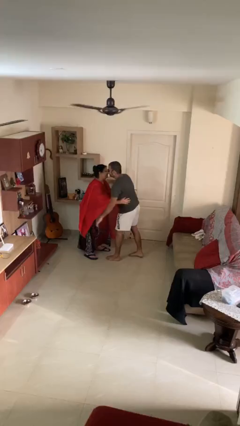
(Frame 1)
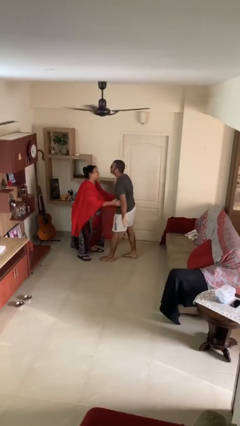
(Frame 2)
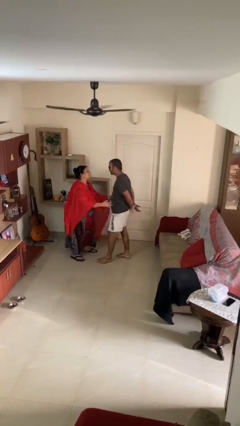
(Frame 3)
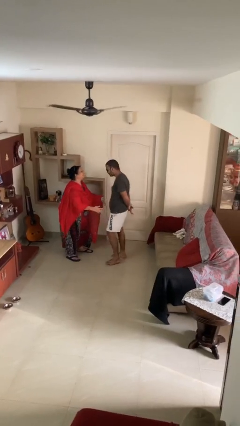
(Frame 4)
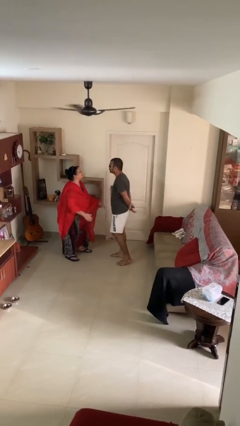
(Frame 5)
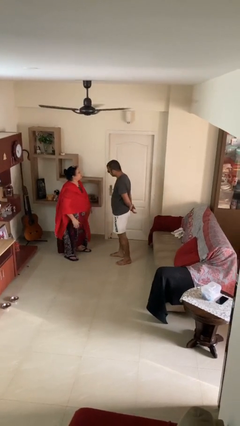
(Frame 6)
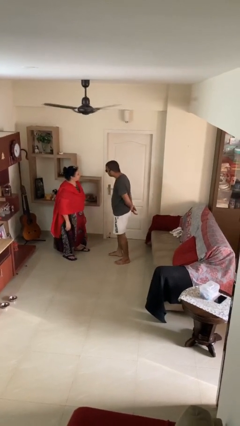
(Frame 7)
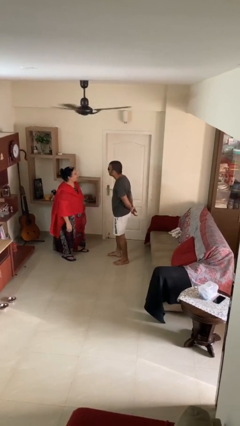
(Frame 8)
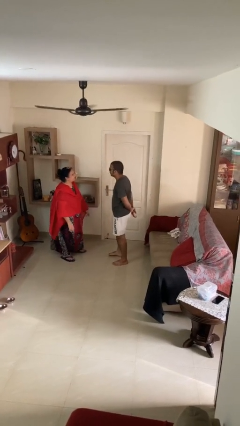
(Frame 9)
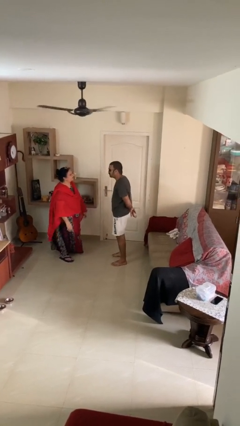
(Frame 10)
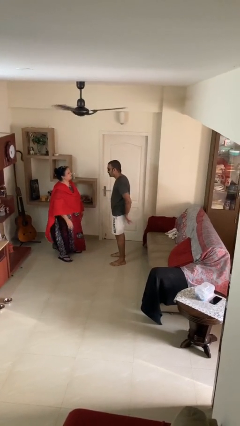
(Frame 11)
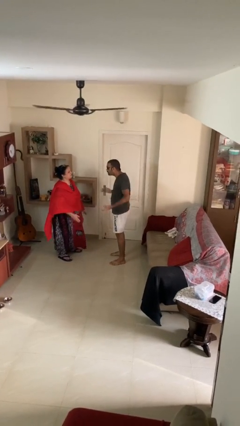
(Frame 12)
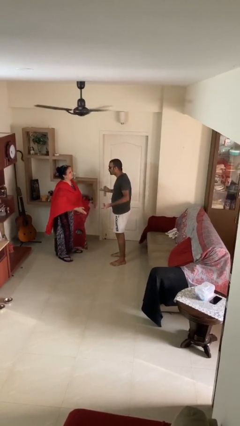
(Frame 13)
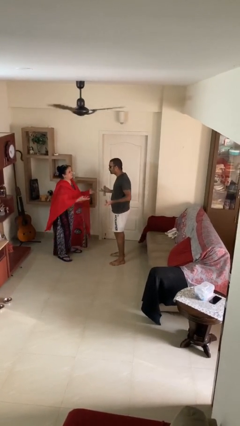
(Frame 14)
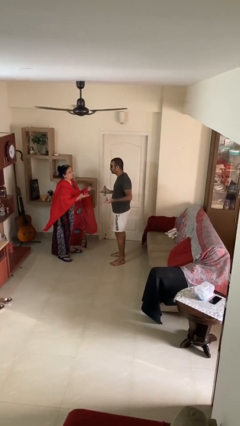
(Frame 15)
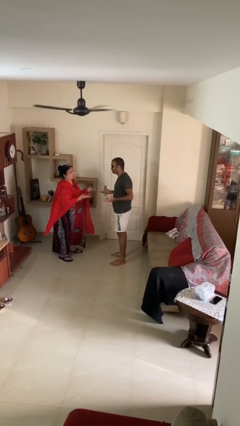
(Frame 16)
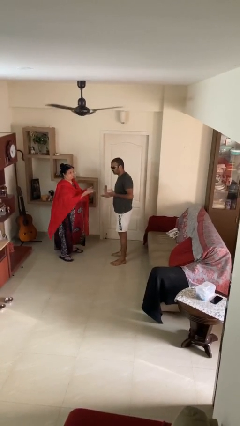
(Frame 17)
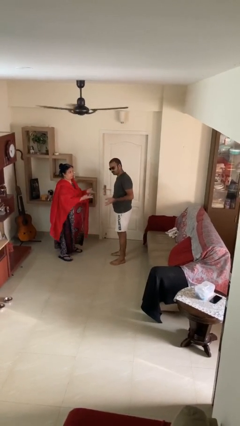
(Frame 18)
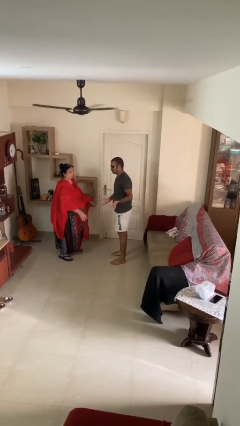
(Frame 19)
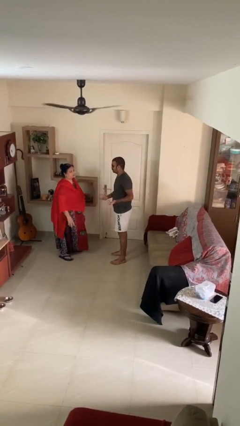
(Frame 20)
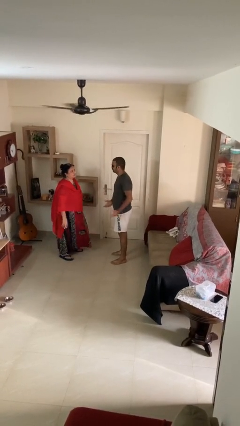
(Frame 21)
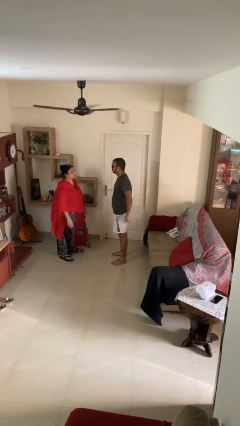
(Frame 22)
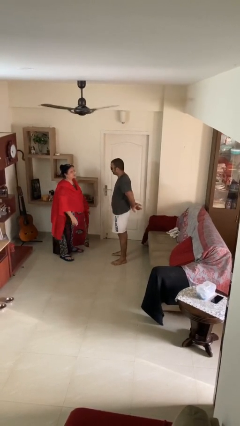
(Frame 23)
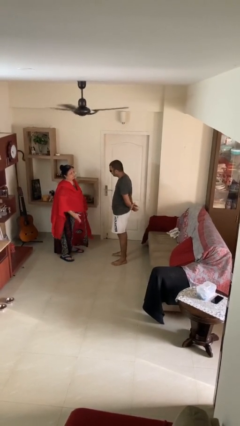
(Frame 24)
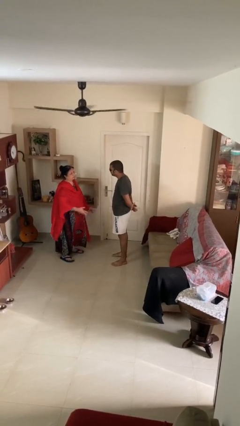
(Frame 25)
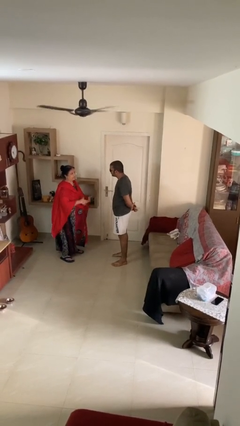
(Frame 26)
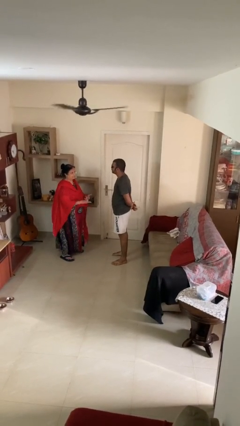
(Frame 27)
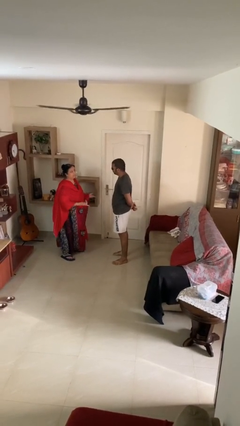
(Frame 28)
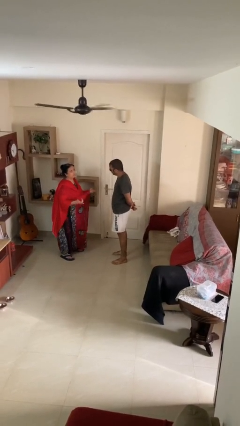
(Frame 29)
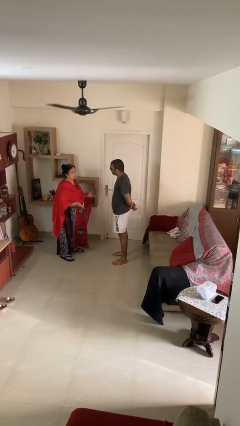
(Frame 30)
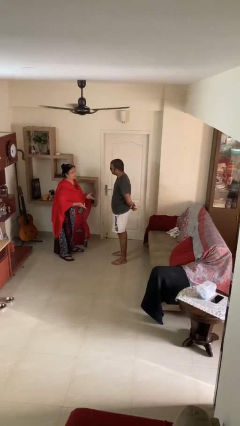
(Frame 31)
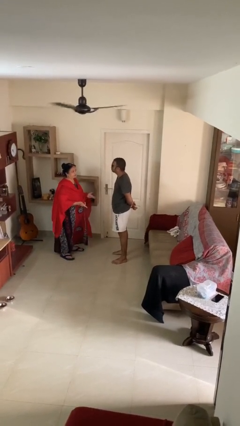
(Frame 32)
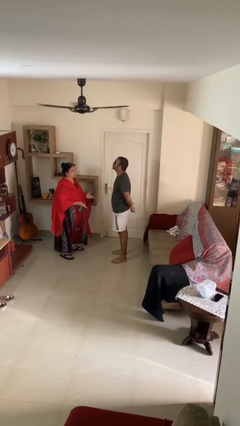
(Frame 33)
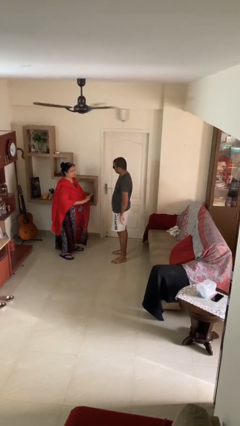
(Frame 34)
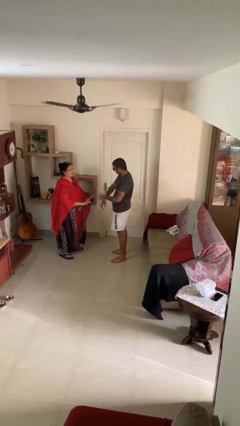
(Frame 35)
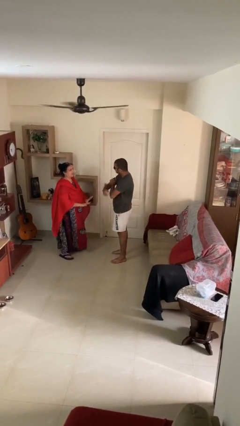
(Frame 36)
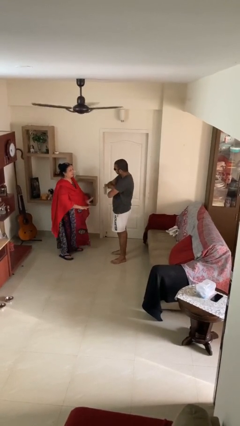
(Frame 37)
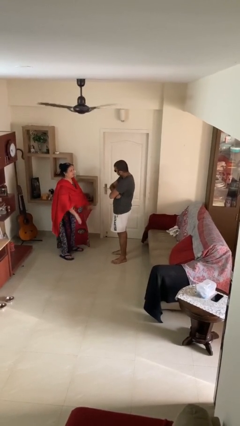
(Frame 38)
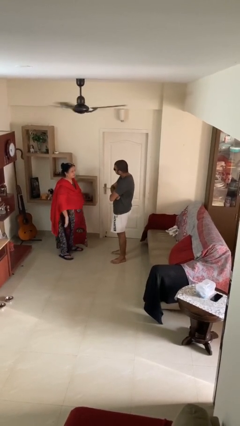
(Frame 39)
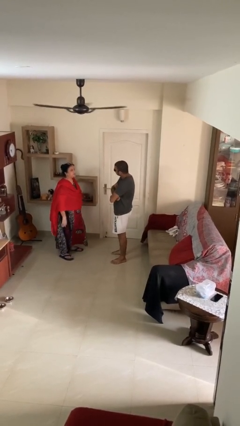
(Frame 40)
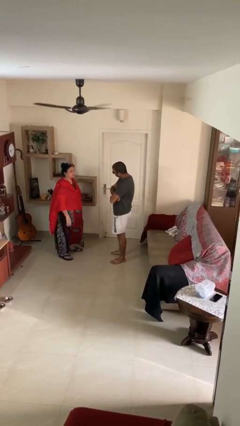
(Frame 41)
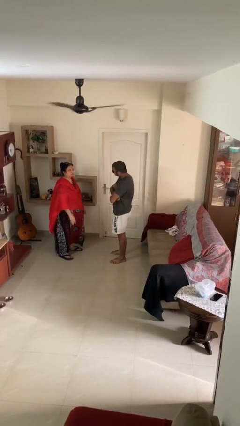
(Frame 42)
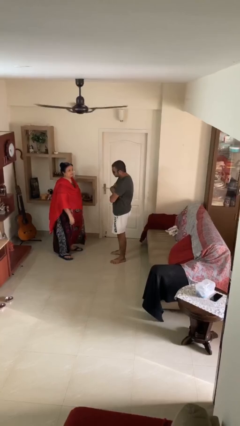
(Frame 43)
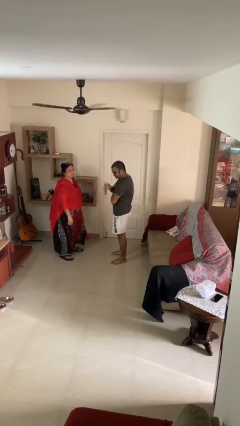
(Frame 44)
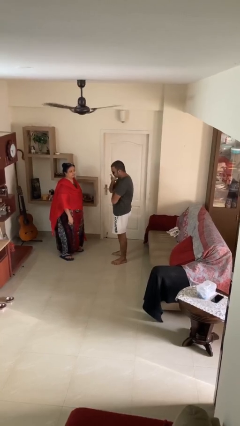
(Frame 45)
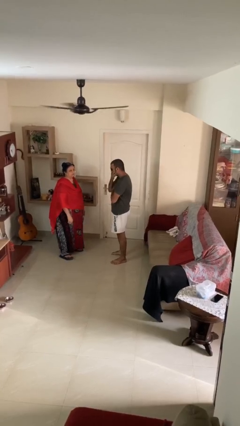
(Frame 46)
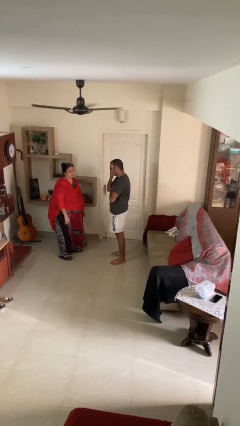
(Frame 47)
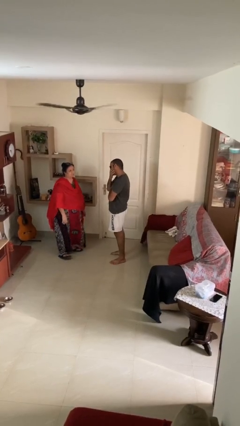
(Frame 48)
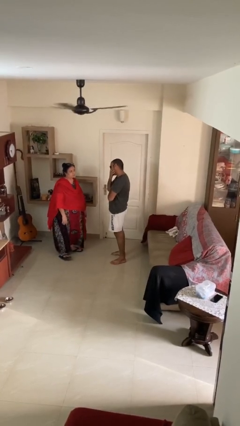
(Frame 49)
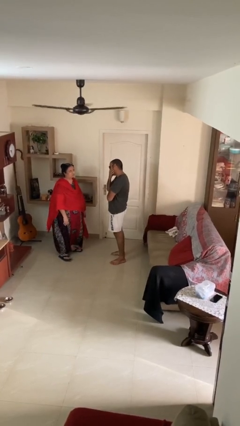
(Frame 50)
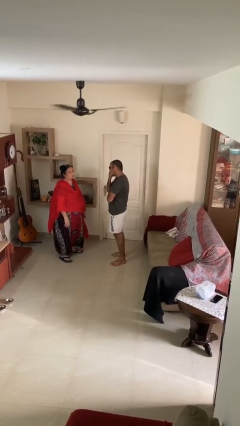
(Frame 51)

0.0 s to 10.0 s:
person talks to person

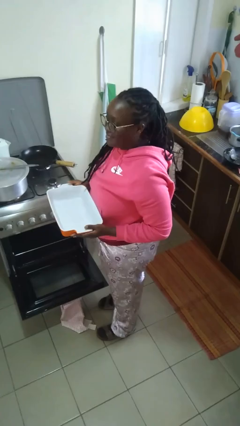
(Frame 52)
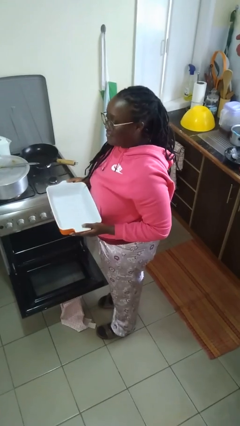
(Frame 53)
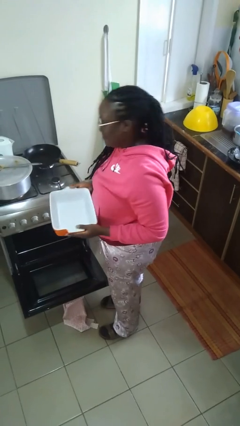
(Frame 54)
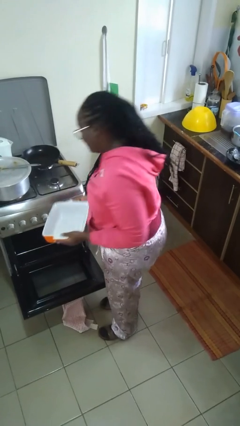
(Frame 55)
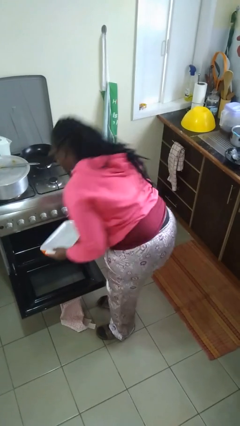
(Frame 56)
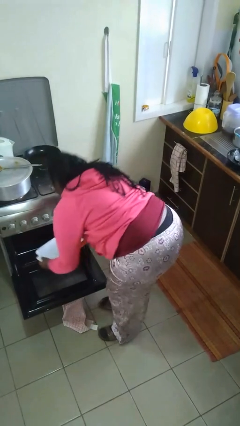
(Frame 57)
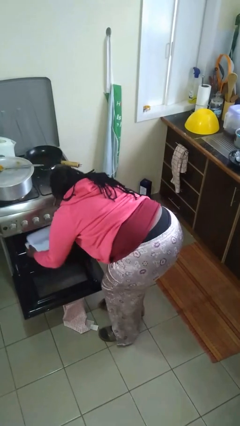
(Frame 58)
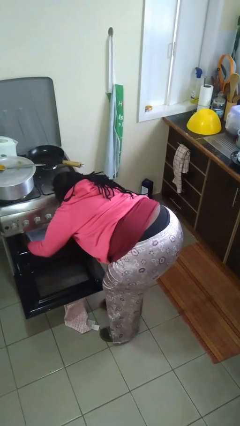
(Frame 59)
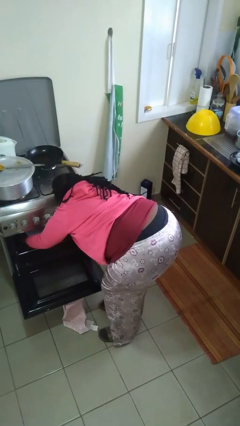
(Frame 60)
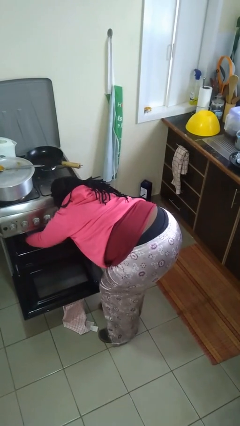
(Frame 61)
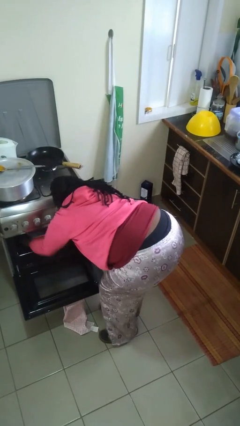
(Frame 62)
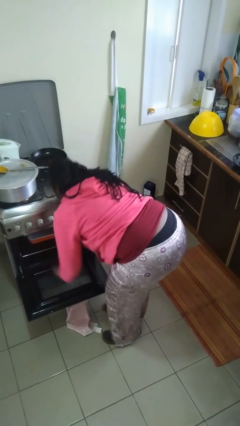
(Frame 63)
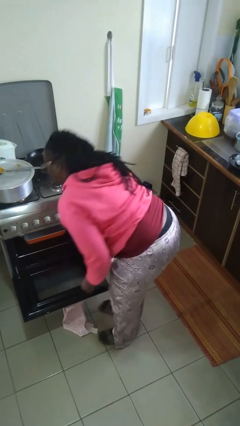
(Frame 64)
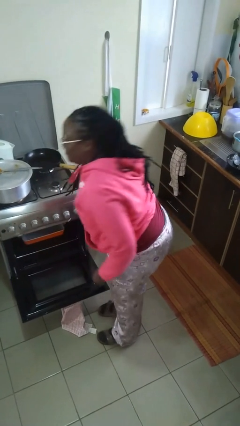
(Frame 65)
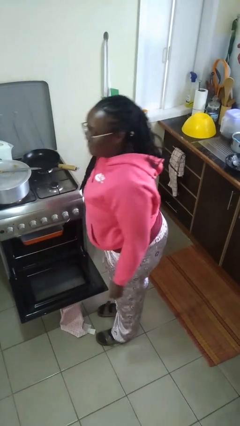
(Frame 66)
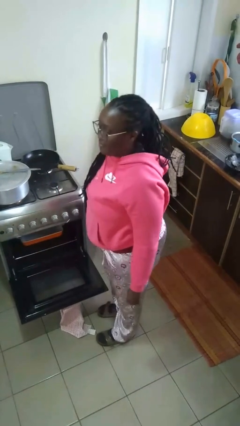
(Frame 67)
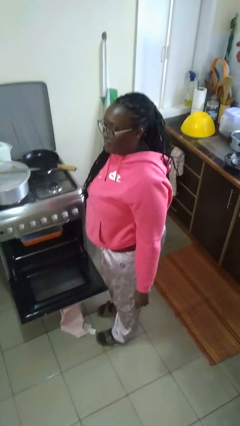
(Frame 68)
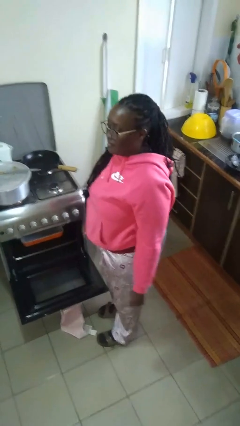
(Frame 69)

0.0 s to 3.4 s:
person puts object into oven

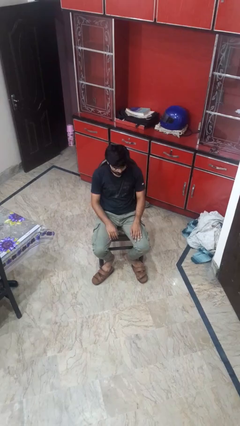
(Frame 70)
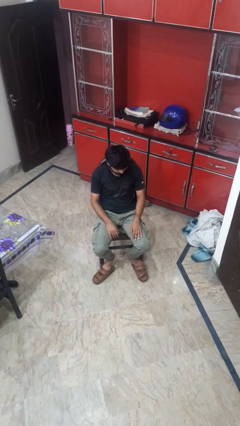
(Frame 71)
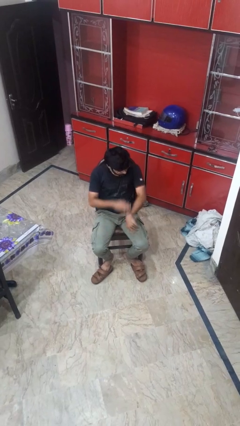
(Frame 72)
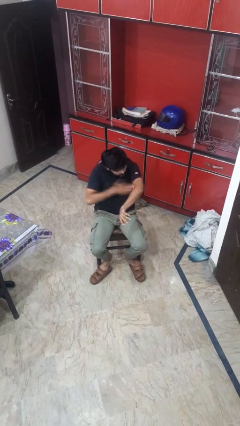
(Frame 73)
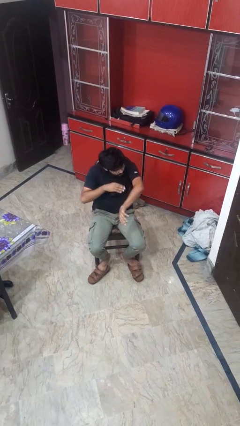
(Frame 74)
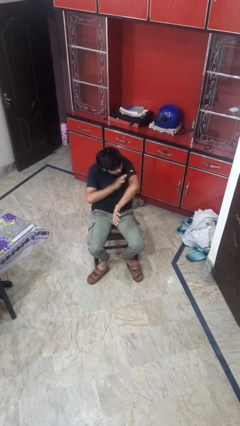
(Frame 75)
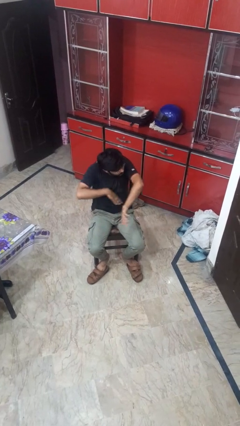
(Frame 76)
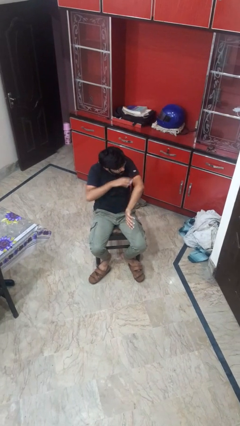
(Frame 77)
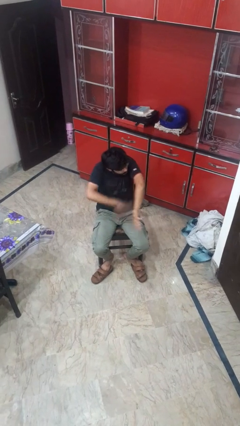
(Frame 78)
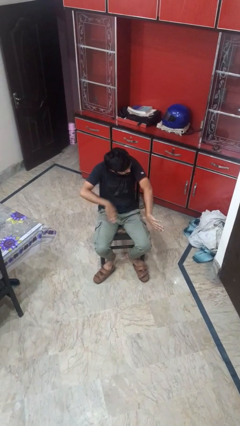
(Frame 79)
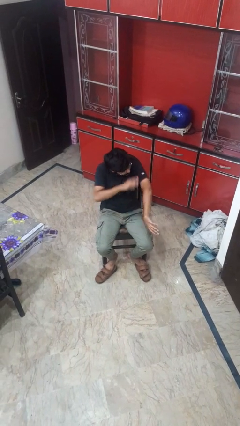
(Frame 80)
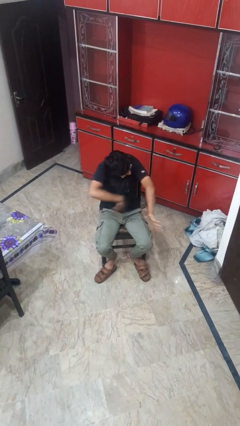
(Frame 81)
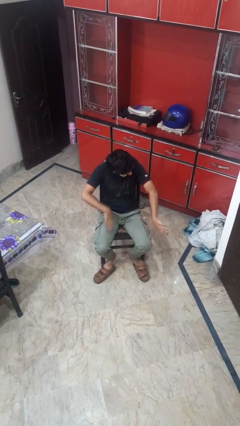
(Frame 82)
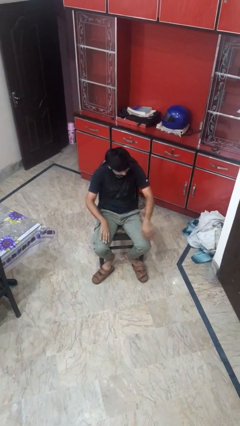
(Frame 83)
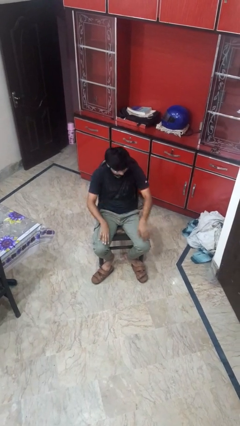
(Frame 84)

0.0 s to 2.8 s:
person swats bug

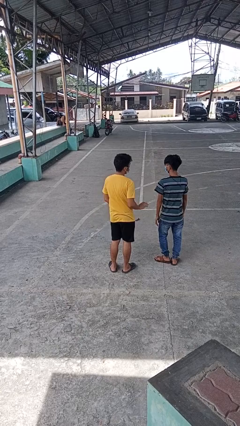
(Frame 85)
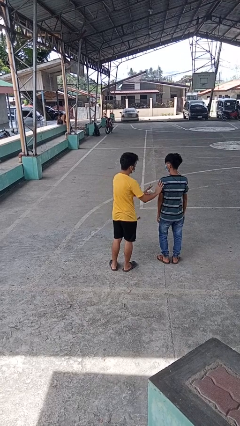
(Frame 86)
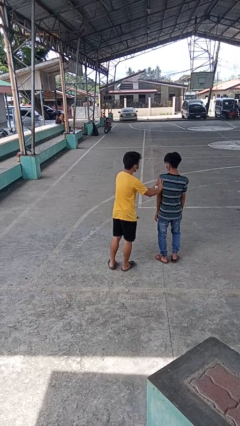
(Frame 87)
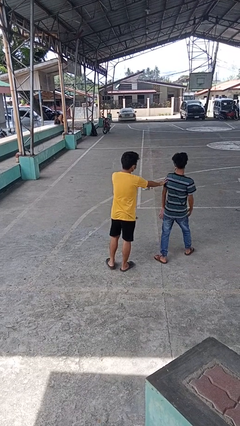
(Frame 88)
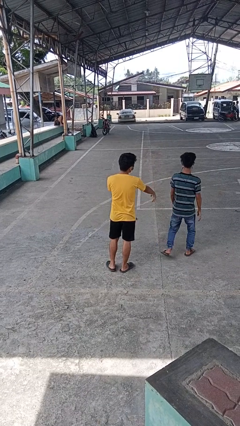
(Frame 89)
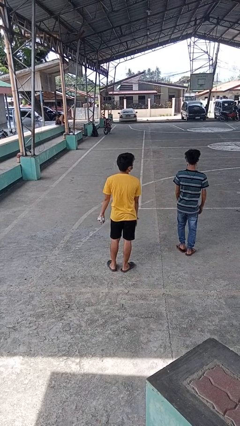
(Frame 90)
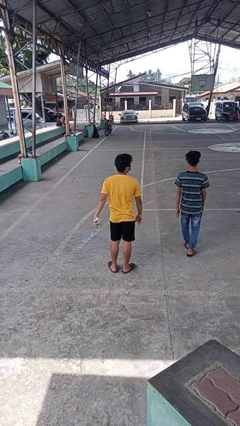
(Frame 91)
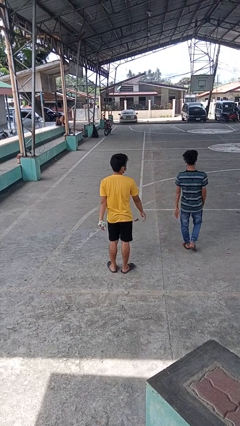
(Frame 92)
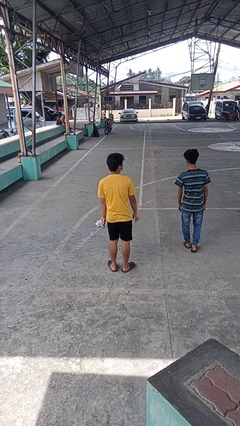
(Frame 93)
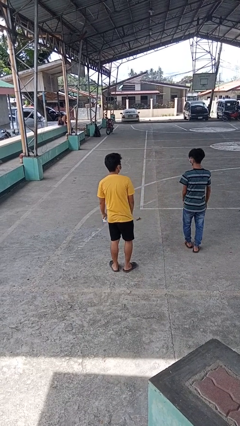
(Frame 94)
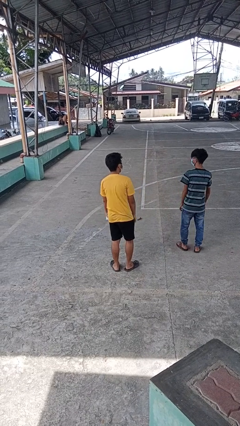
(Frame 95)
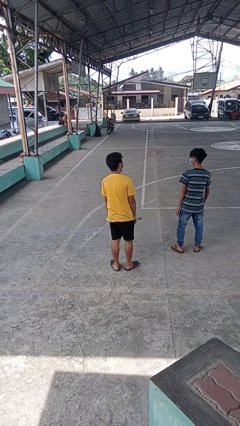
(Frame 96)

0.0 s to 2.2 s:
person shoves person
